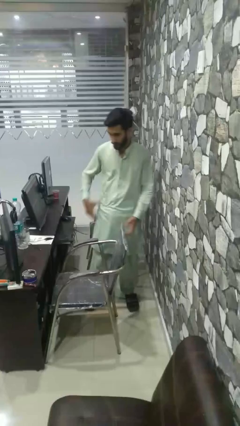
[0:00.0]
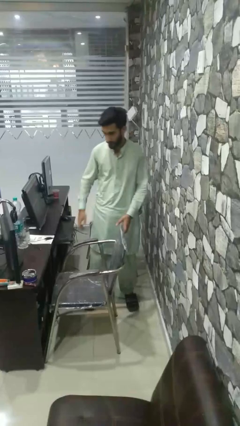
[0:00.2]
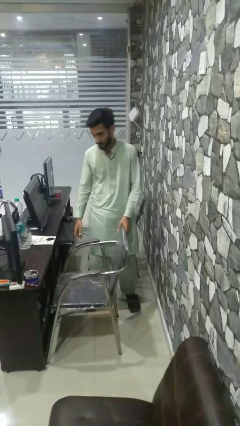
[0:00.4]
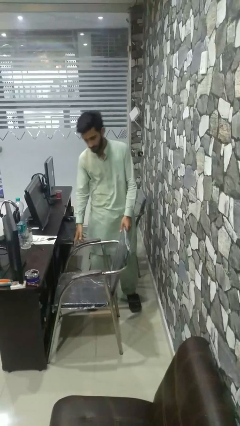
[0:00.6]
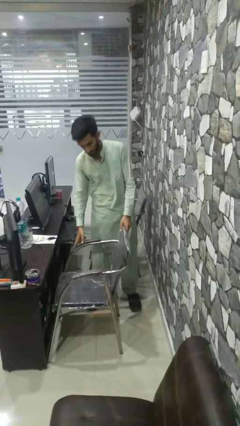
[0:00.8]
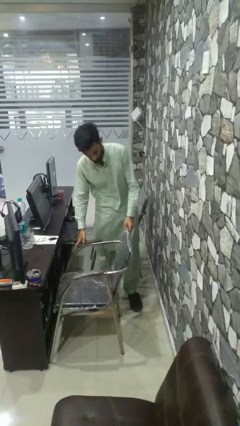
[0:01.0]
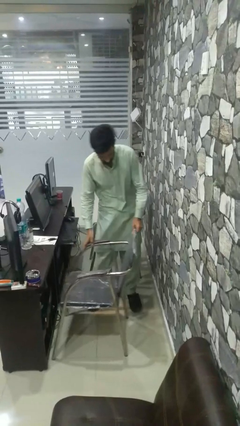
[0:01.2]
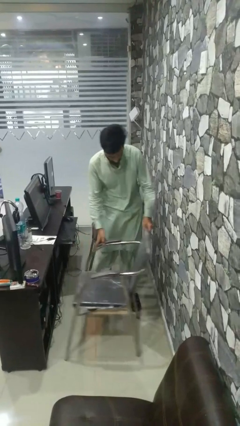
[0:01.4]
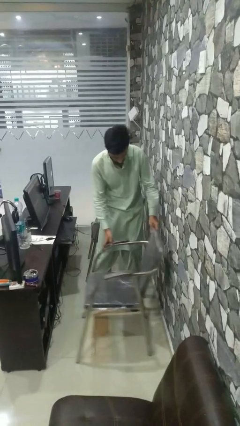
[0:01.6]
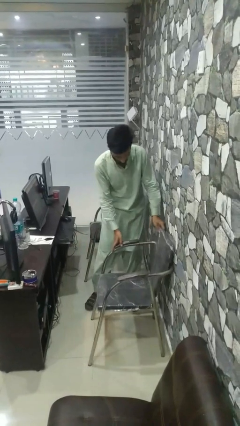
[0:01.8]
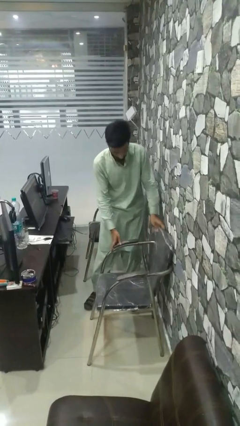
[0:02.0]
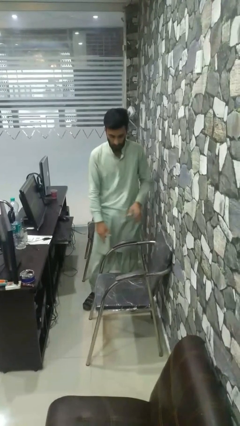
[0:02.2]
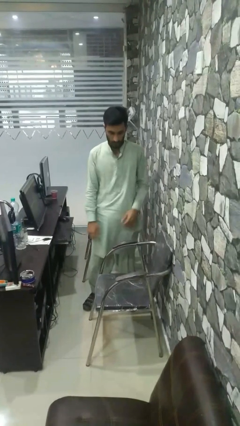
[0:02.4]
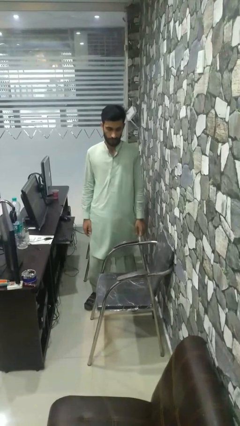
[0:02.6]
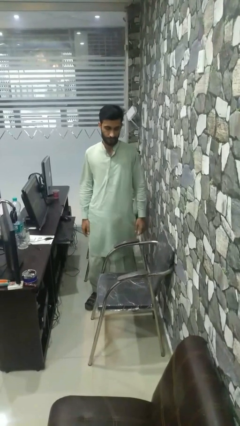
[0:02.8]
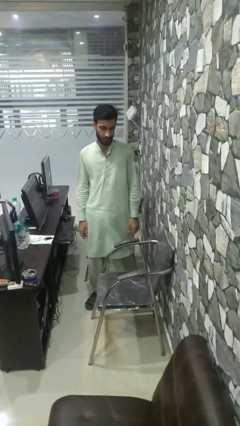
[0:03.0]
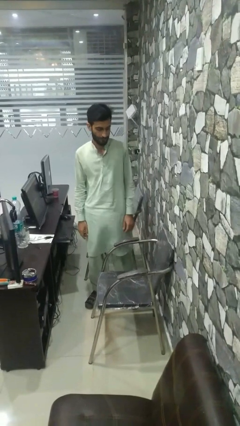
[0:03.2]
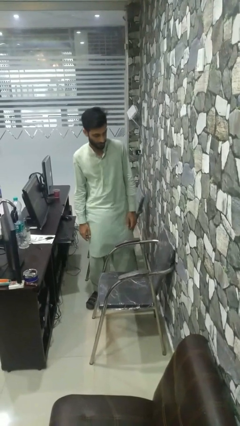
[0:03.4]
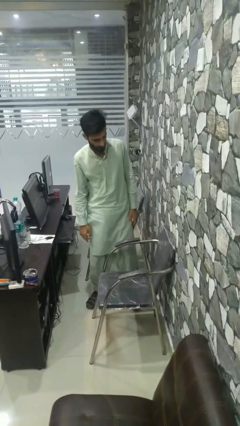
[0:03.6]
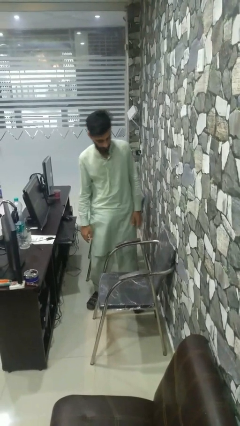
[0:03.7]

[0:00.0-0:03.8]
person pulls out chair

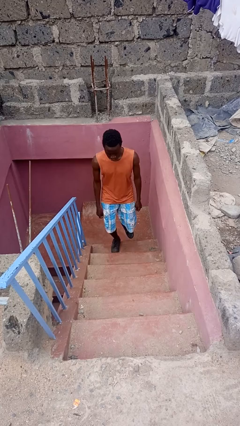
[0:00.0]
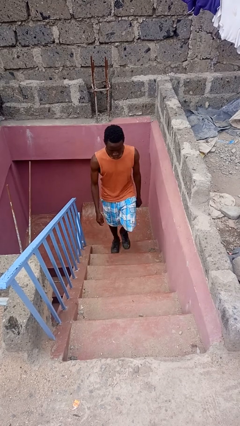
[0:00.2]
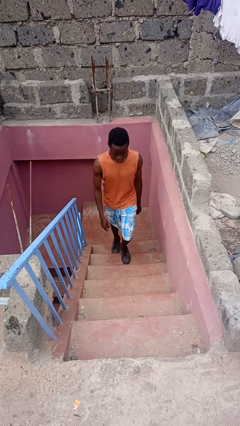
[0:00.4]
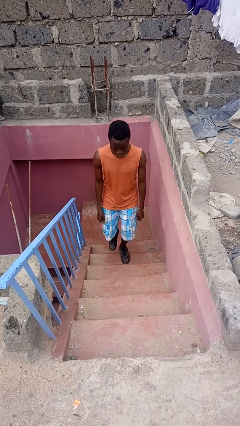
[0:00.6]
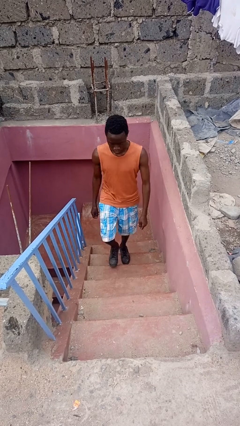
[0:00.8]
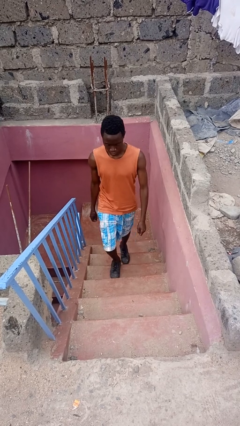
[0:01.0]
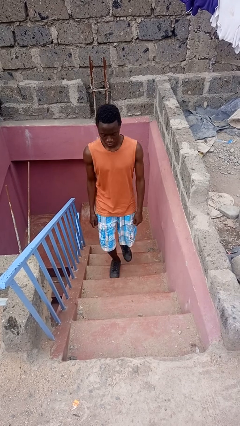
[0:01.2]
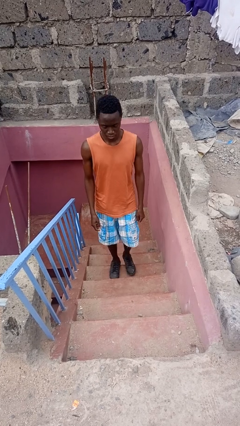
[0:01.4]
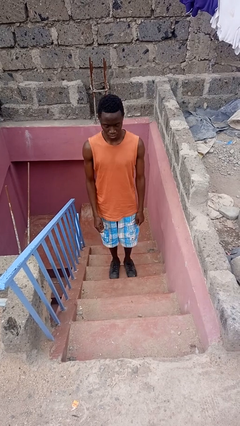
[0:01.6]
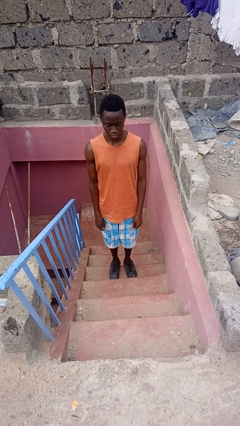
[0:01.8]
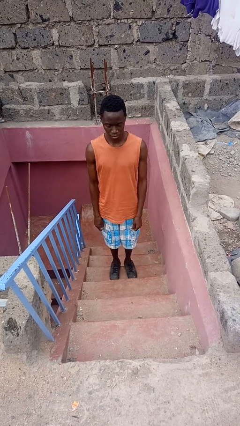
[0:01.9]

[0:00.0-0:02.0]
person climbs up stairs

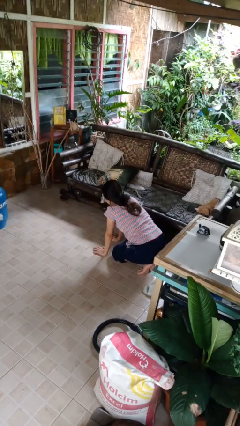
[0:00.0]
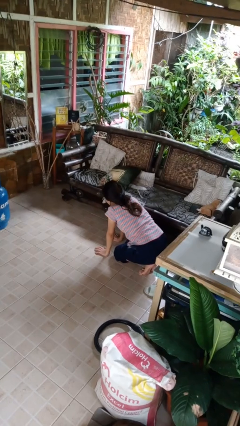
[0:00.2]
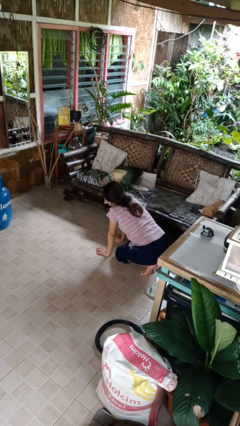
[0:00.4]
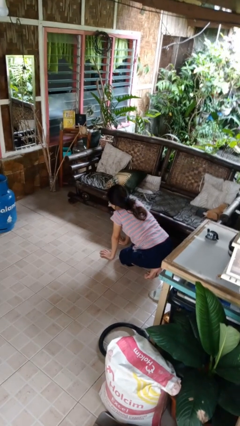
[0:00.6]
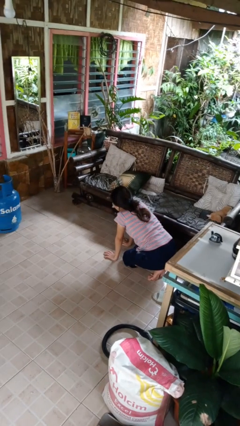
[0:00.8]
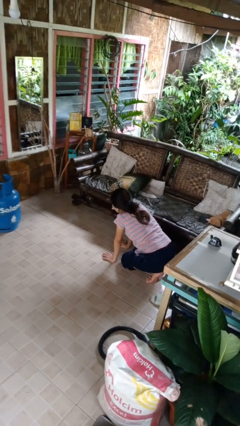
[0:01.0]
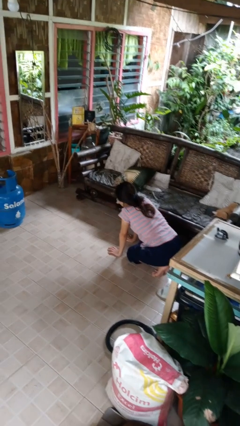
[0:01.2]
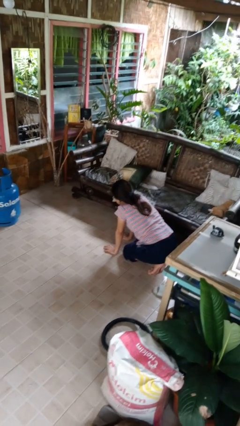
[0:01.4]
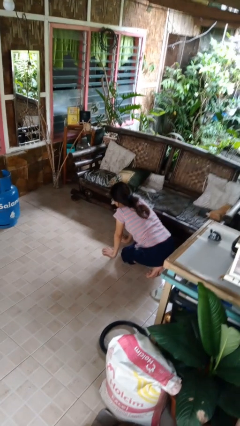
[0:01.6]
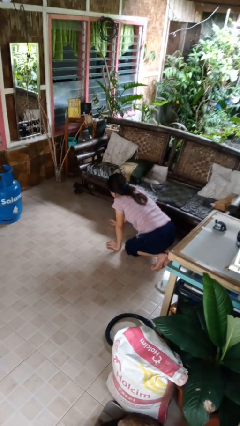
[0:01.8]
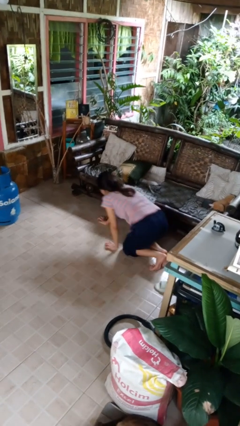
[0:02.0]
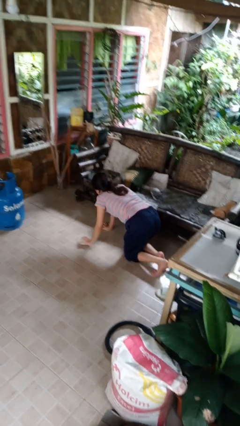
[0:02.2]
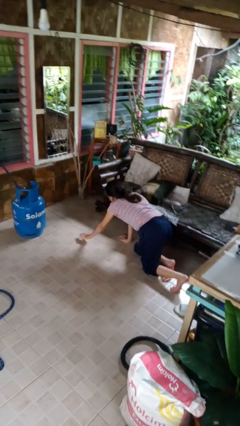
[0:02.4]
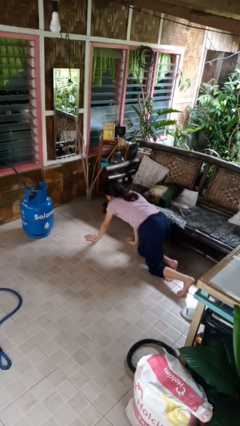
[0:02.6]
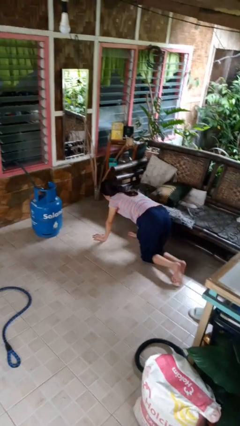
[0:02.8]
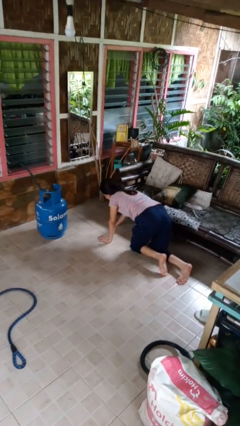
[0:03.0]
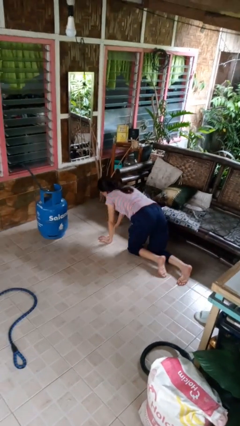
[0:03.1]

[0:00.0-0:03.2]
person crawls

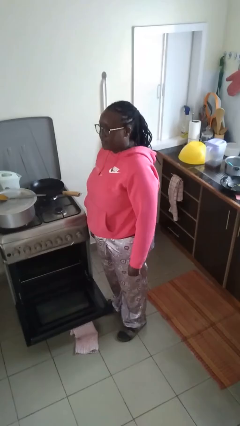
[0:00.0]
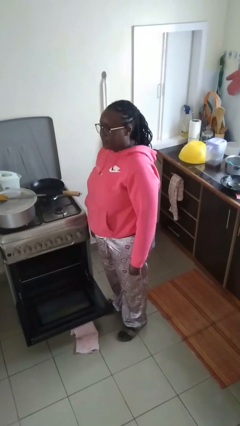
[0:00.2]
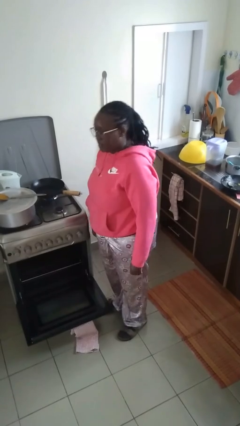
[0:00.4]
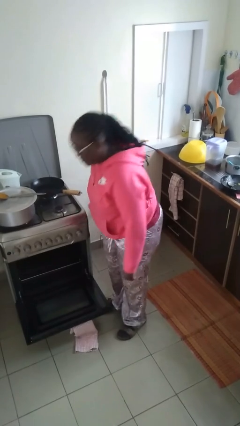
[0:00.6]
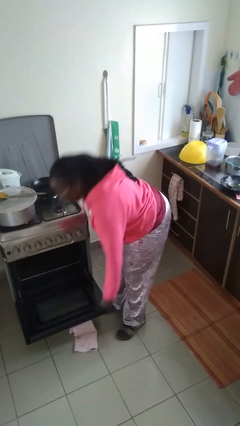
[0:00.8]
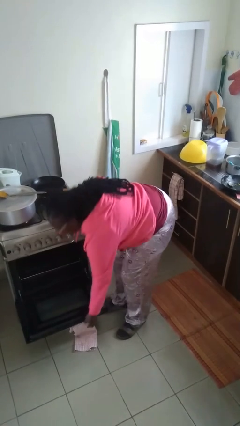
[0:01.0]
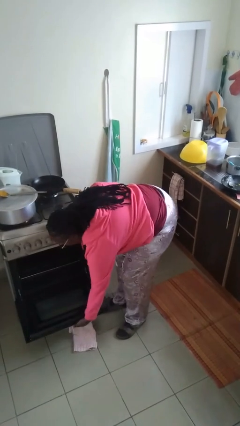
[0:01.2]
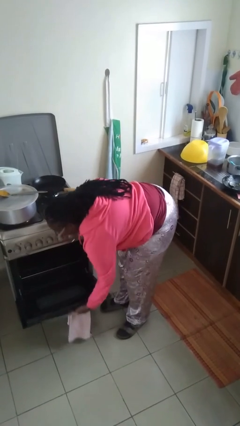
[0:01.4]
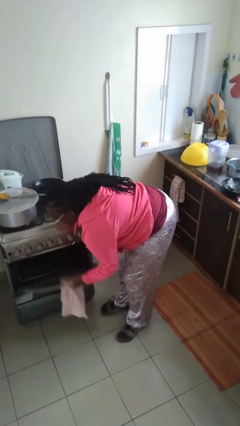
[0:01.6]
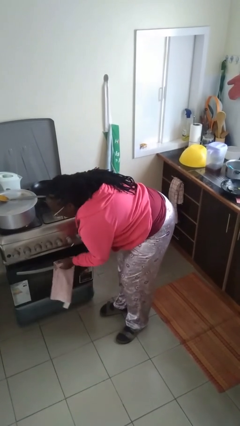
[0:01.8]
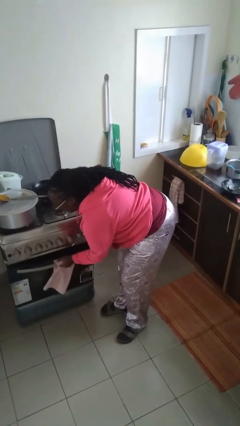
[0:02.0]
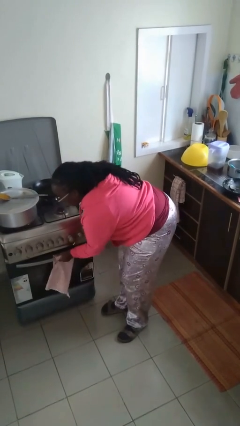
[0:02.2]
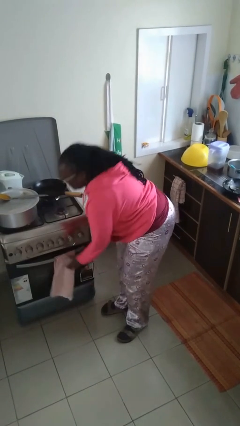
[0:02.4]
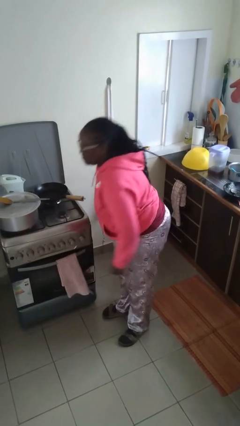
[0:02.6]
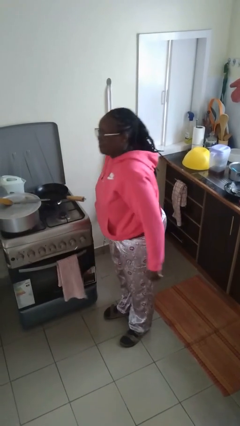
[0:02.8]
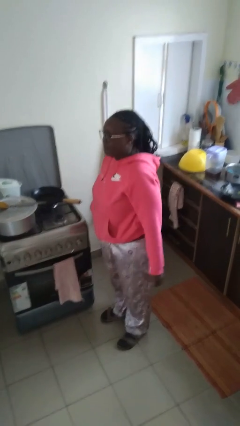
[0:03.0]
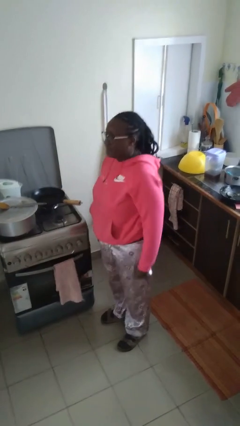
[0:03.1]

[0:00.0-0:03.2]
person closes oven door

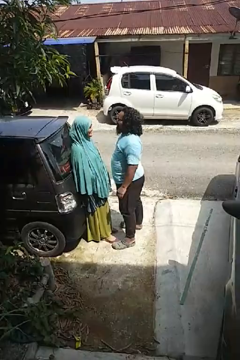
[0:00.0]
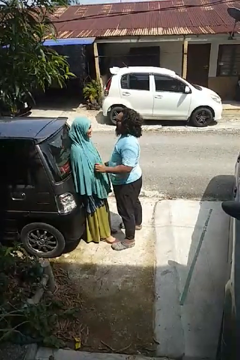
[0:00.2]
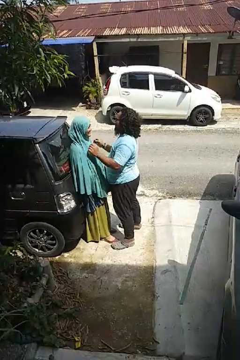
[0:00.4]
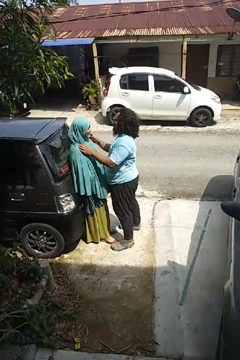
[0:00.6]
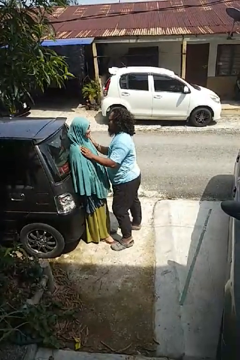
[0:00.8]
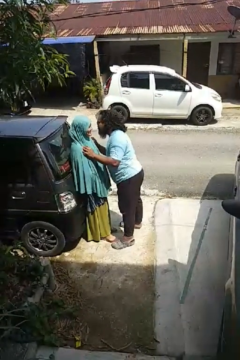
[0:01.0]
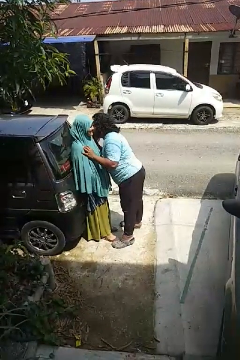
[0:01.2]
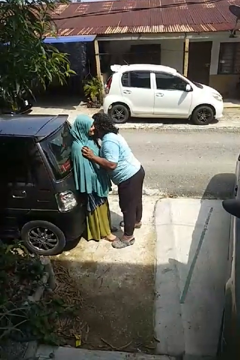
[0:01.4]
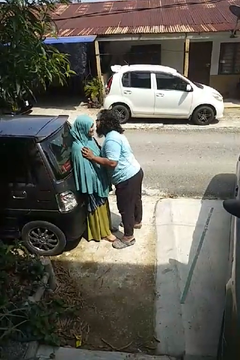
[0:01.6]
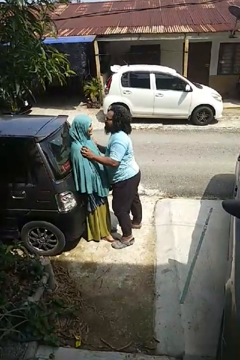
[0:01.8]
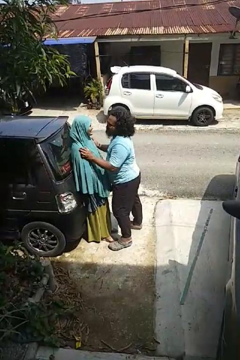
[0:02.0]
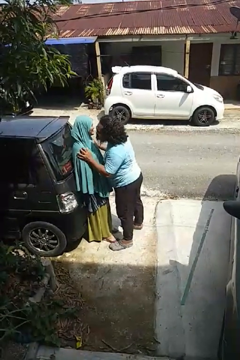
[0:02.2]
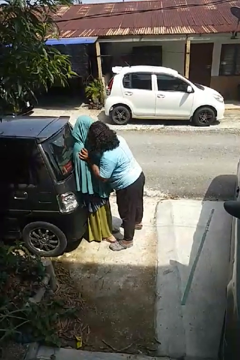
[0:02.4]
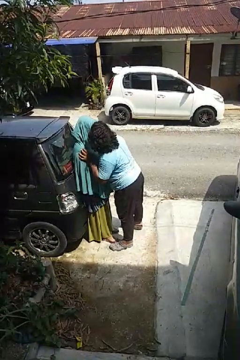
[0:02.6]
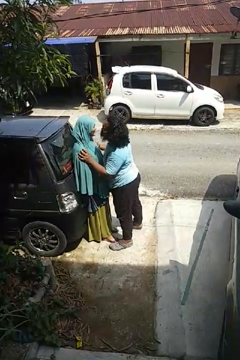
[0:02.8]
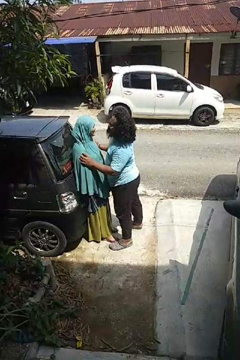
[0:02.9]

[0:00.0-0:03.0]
person kisses cheek of person

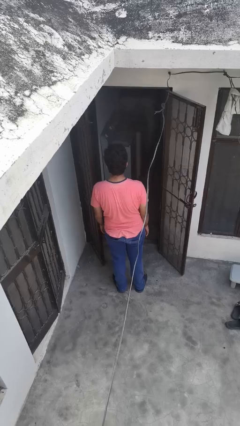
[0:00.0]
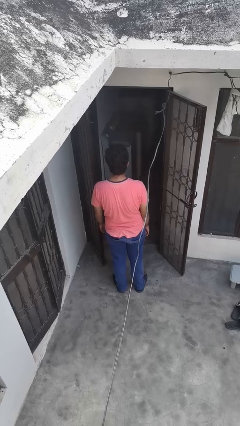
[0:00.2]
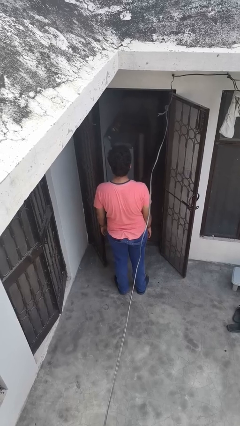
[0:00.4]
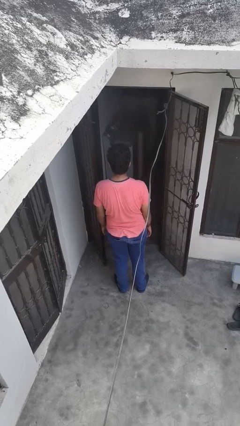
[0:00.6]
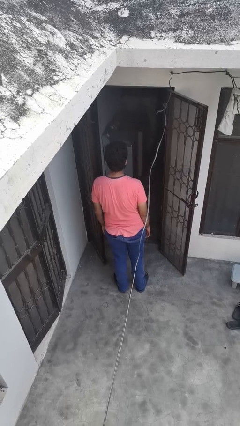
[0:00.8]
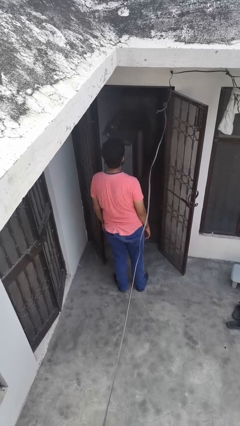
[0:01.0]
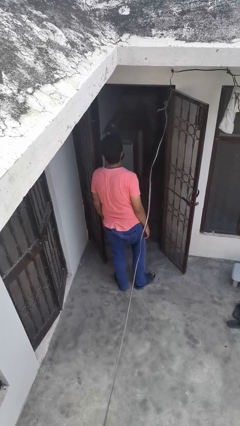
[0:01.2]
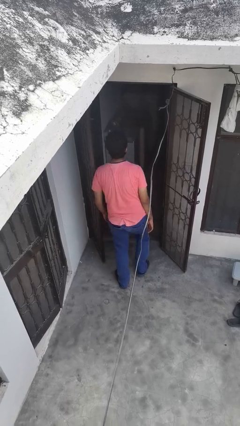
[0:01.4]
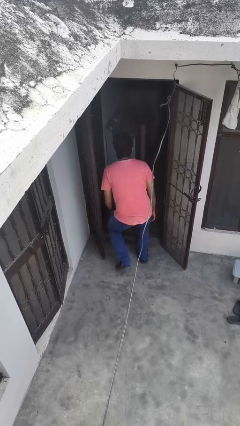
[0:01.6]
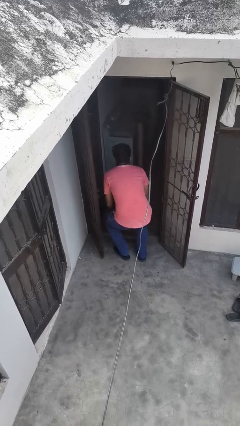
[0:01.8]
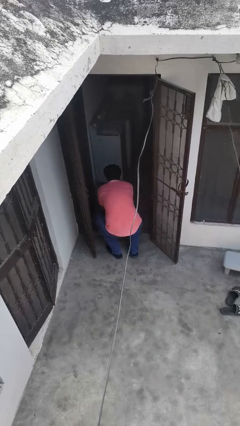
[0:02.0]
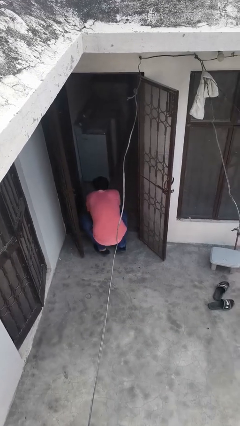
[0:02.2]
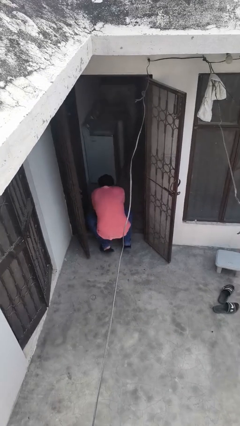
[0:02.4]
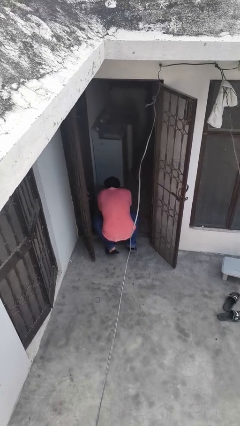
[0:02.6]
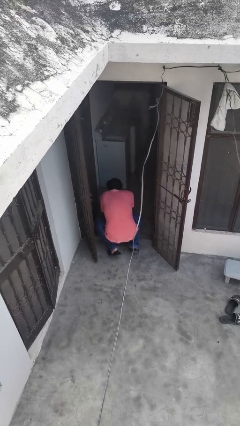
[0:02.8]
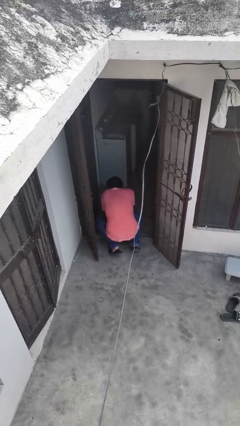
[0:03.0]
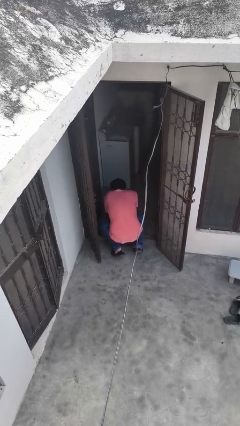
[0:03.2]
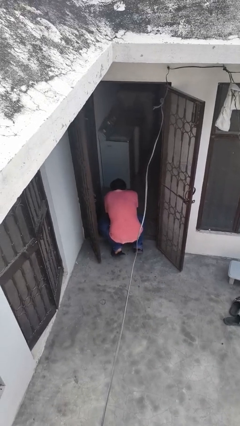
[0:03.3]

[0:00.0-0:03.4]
person bumps into wall
